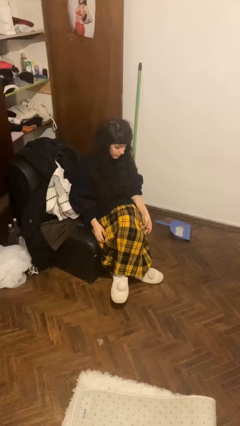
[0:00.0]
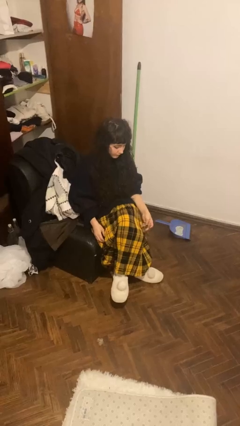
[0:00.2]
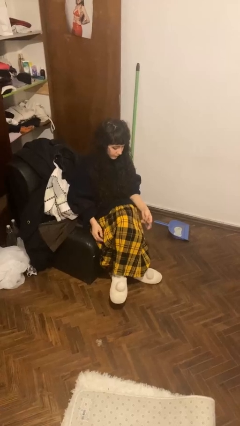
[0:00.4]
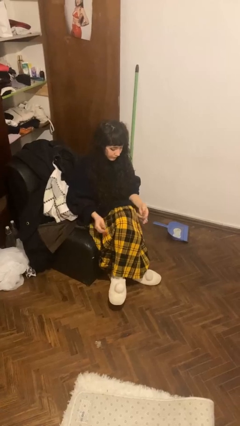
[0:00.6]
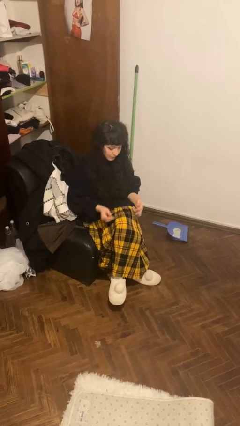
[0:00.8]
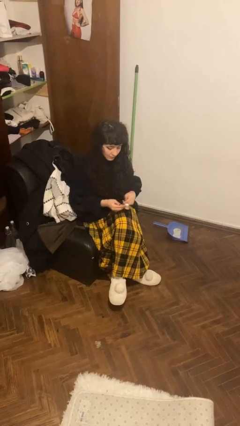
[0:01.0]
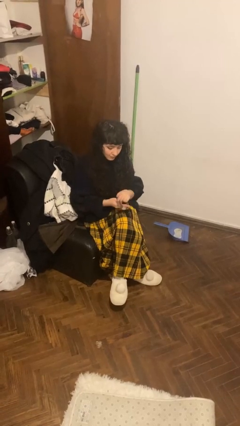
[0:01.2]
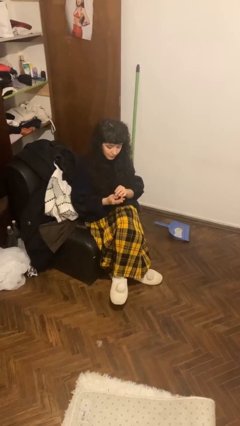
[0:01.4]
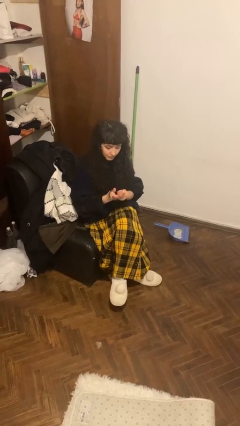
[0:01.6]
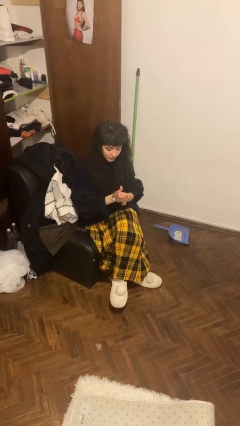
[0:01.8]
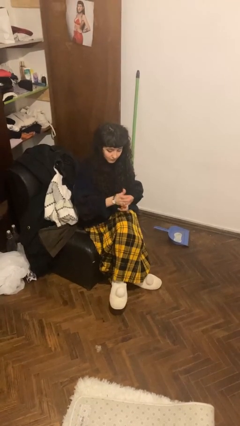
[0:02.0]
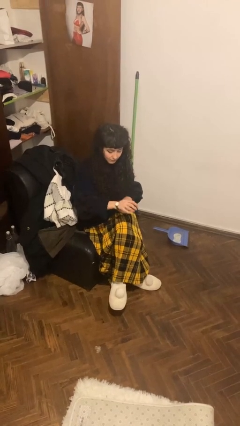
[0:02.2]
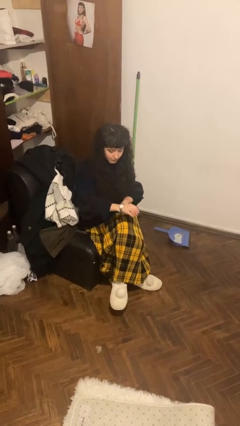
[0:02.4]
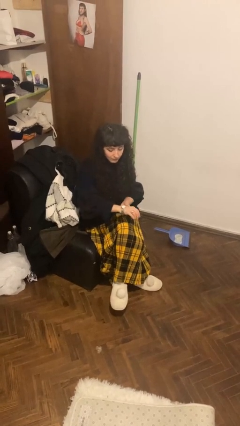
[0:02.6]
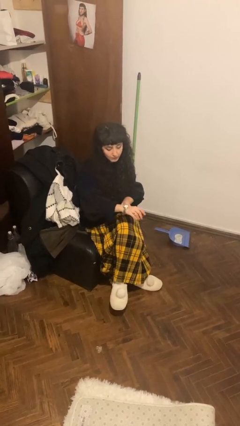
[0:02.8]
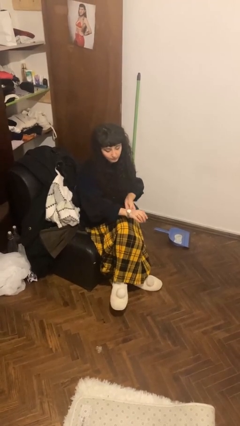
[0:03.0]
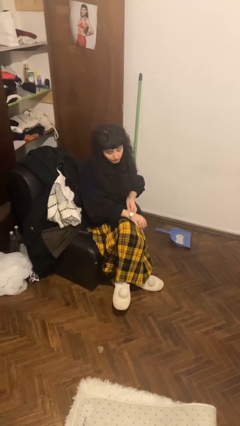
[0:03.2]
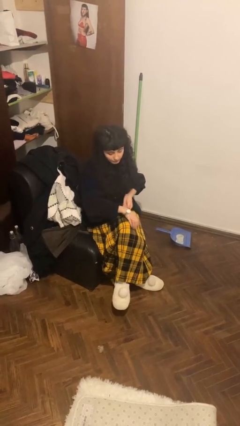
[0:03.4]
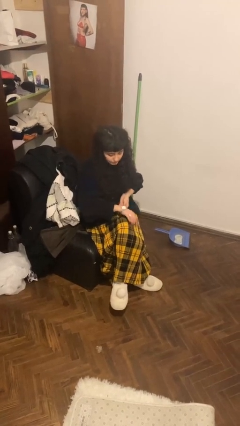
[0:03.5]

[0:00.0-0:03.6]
person puts on wristwatch

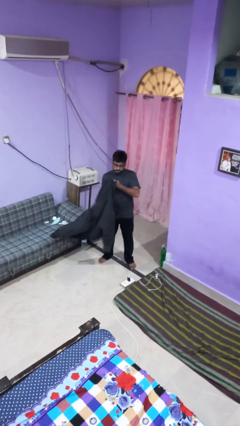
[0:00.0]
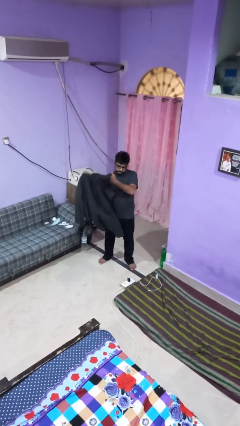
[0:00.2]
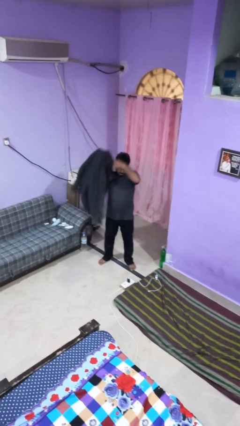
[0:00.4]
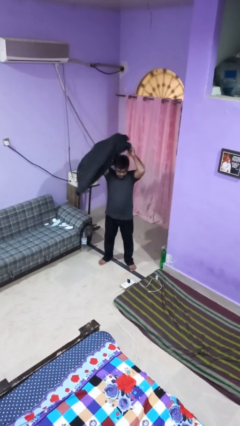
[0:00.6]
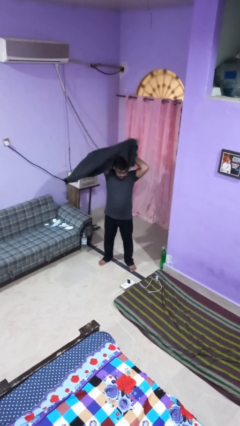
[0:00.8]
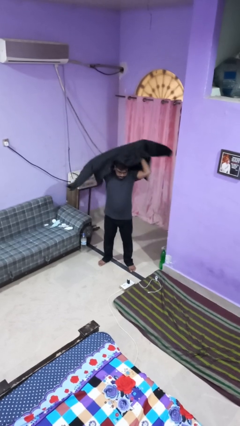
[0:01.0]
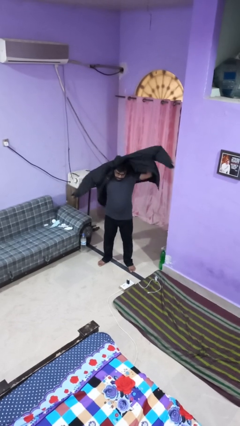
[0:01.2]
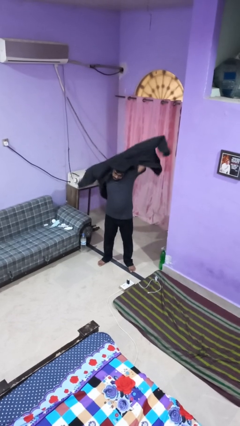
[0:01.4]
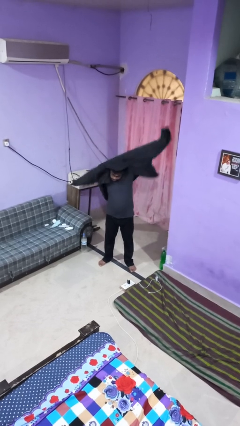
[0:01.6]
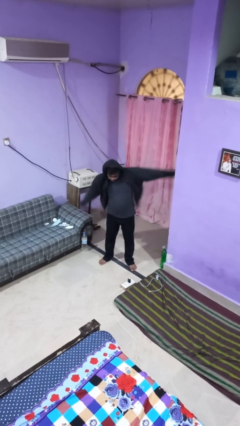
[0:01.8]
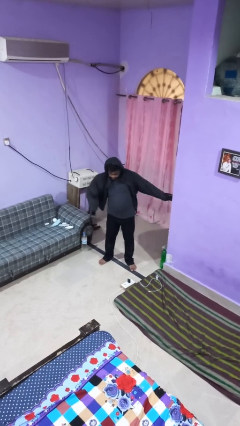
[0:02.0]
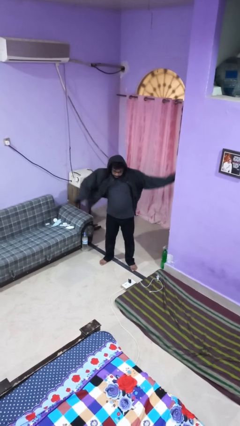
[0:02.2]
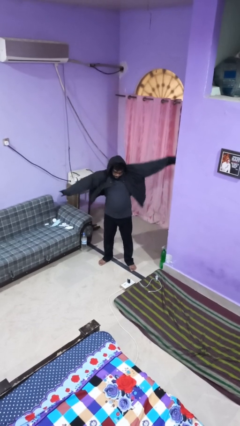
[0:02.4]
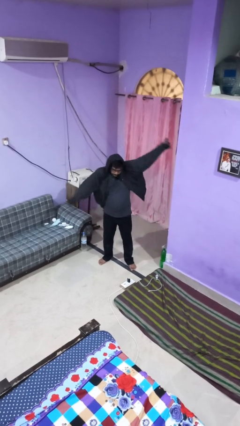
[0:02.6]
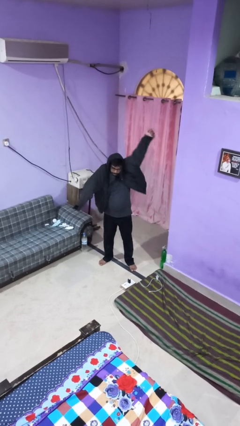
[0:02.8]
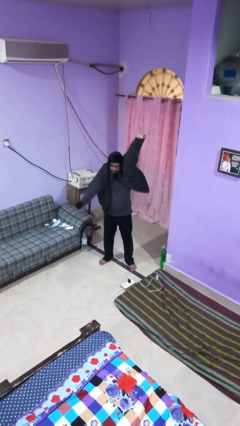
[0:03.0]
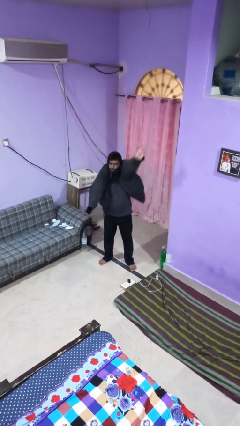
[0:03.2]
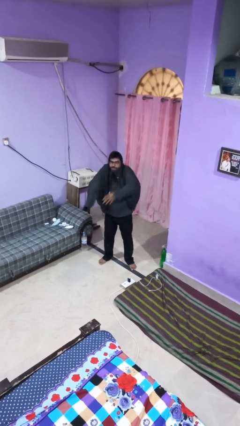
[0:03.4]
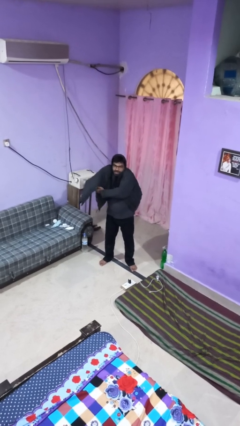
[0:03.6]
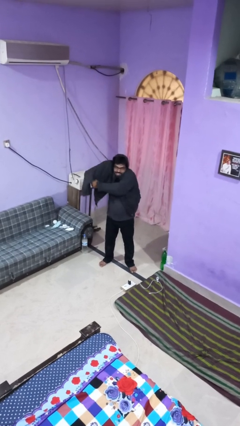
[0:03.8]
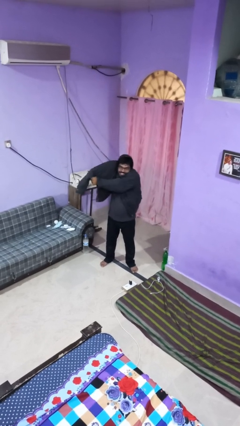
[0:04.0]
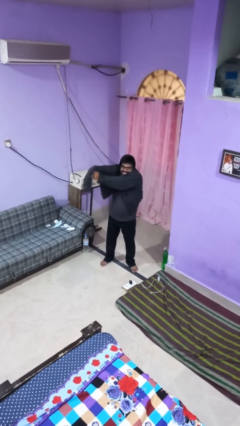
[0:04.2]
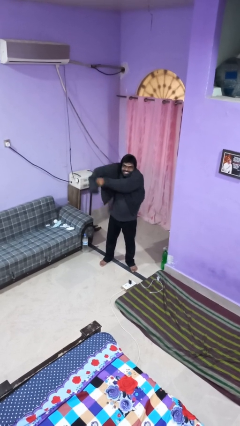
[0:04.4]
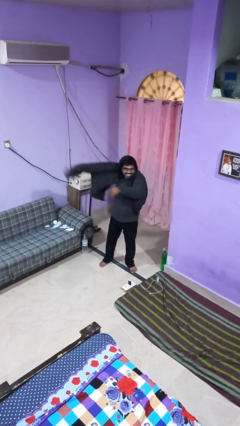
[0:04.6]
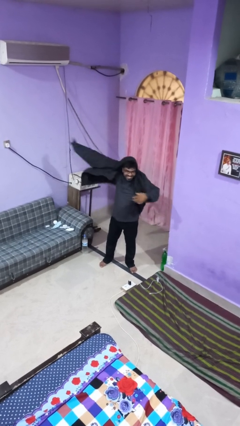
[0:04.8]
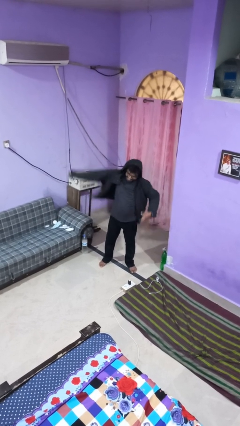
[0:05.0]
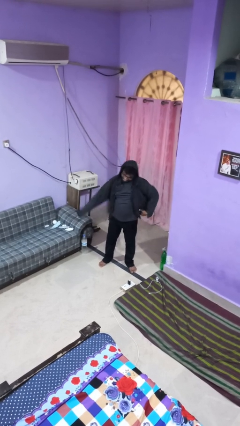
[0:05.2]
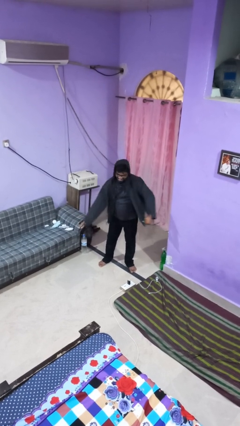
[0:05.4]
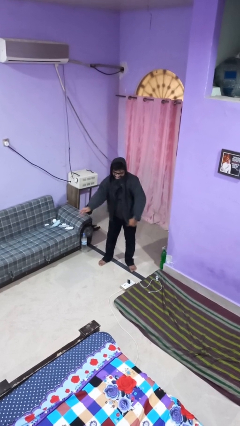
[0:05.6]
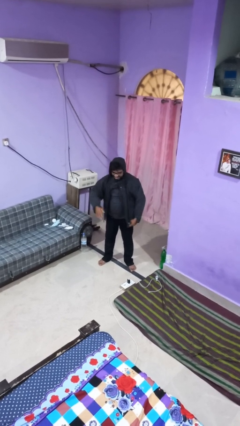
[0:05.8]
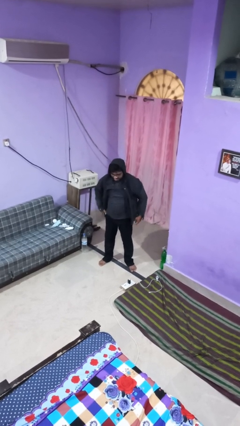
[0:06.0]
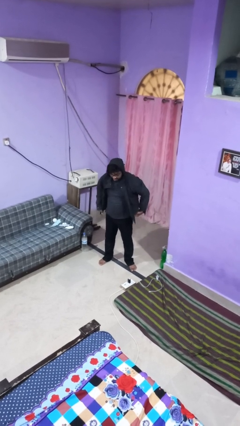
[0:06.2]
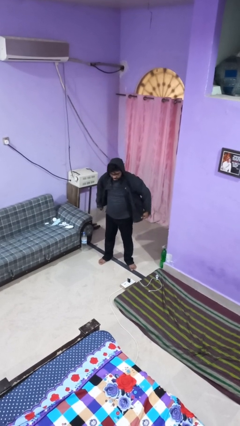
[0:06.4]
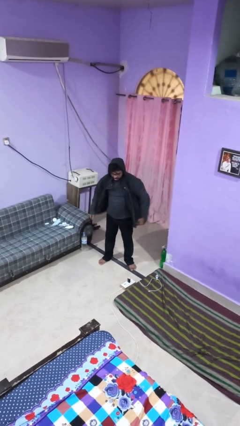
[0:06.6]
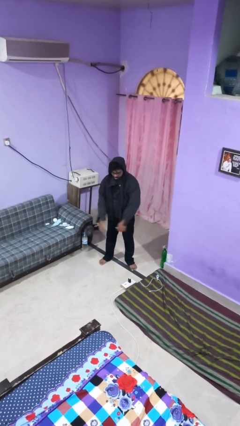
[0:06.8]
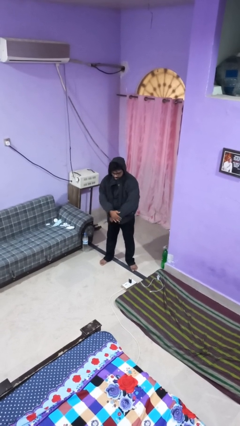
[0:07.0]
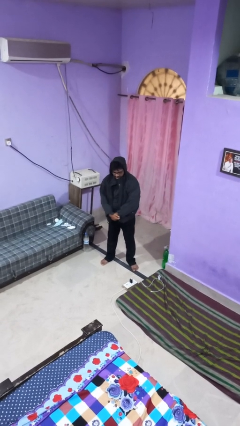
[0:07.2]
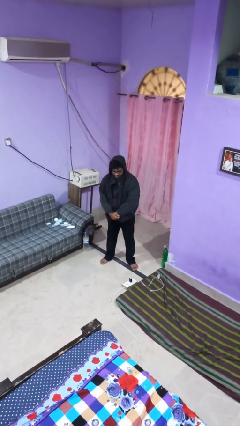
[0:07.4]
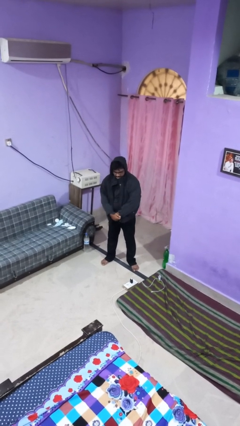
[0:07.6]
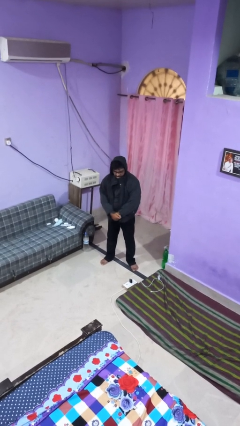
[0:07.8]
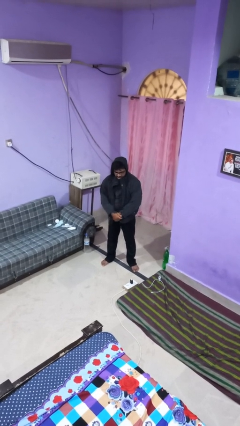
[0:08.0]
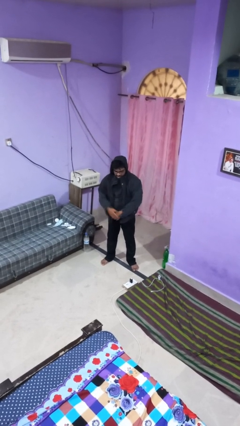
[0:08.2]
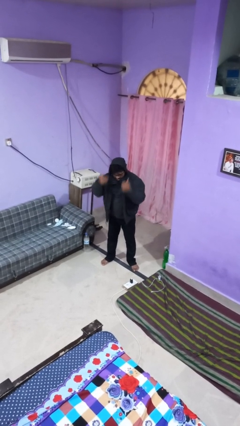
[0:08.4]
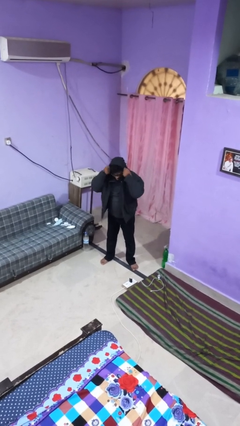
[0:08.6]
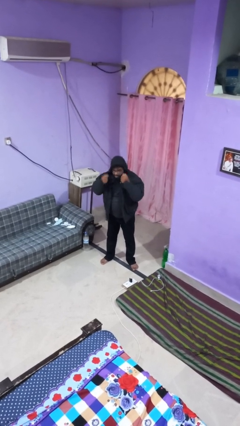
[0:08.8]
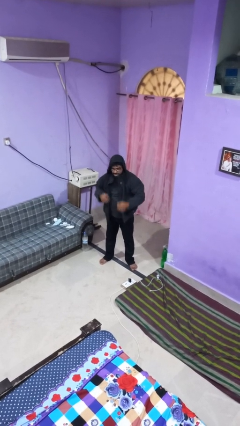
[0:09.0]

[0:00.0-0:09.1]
person puts on hoodie

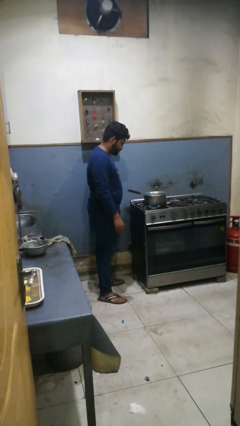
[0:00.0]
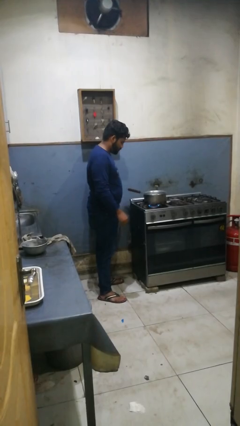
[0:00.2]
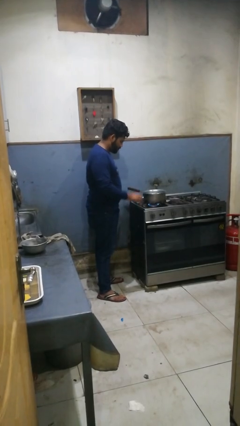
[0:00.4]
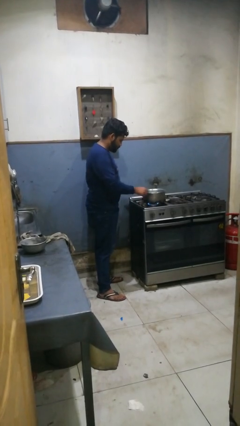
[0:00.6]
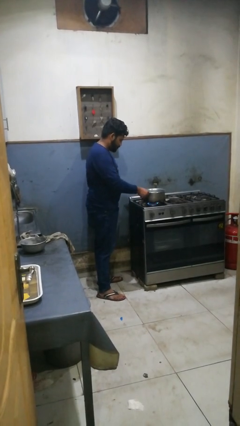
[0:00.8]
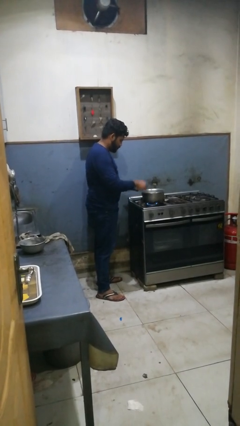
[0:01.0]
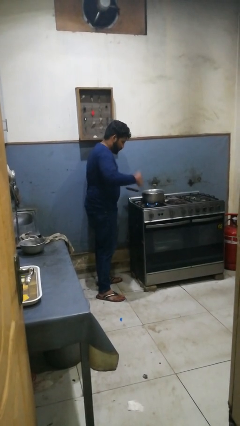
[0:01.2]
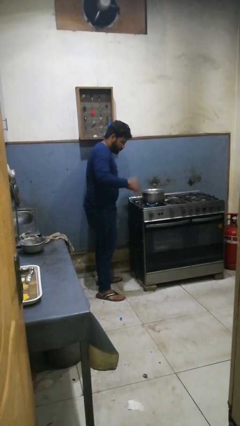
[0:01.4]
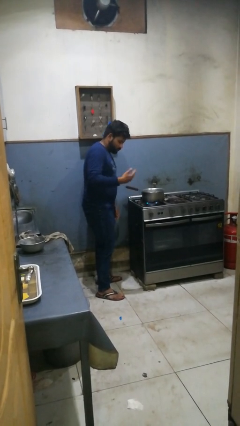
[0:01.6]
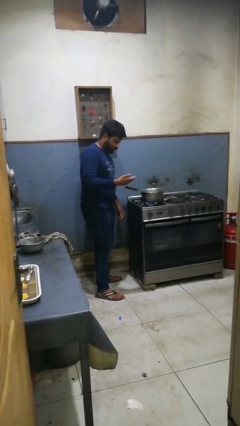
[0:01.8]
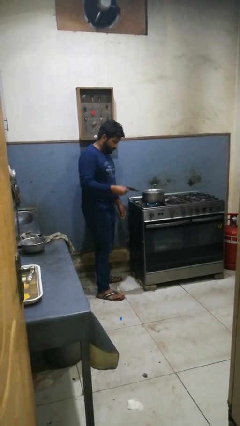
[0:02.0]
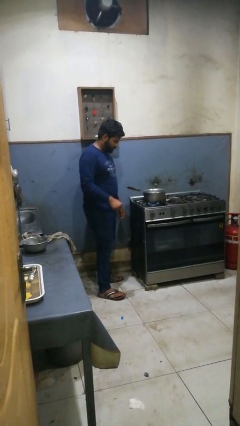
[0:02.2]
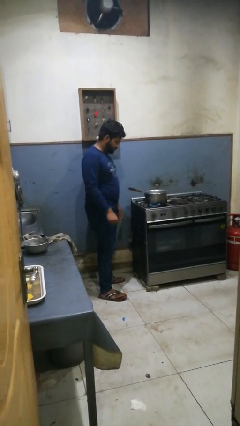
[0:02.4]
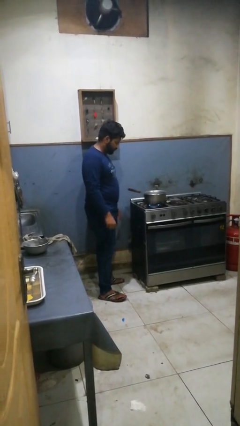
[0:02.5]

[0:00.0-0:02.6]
person burns hand

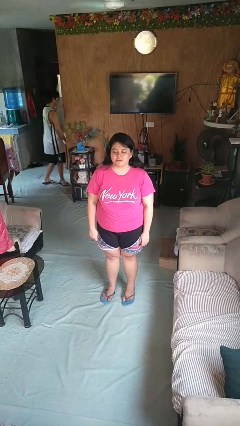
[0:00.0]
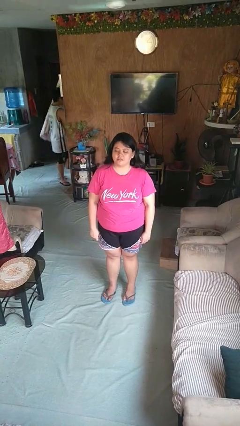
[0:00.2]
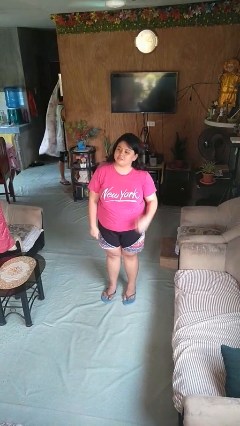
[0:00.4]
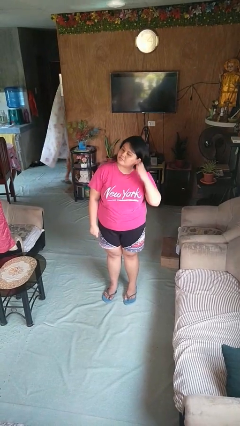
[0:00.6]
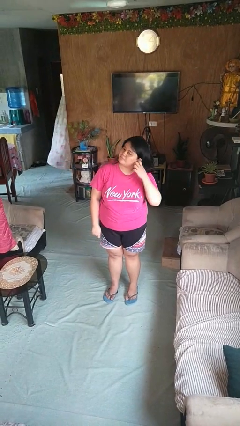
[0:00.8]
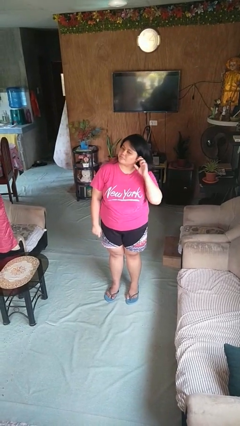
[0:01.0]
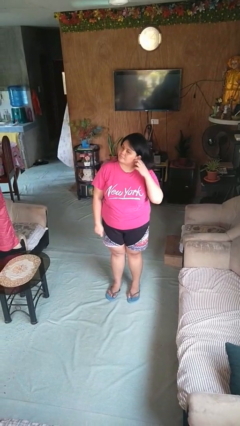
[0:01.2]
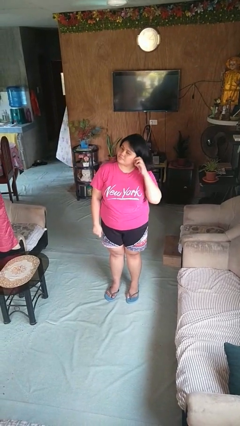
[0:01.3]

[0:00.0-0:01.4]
person touches earlobe

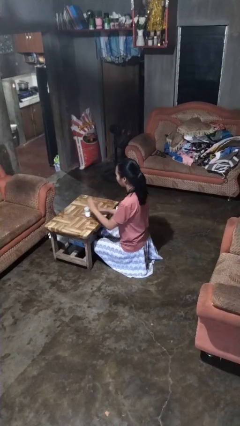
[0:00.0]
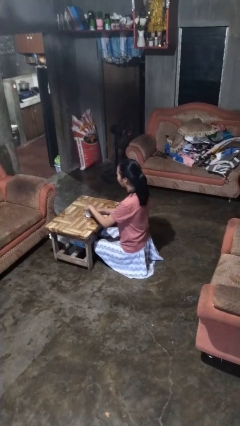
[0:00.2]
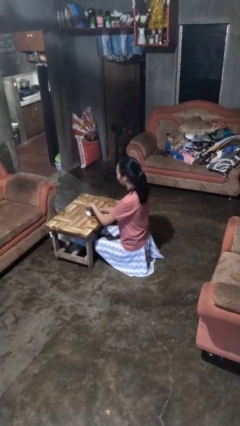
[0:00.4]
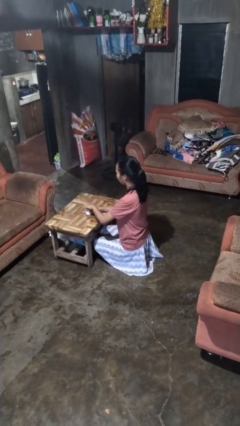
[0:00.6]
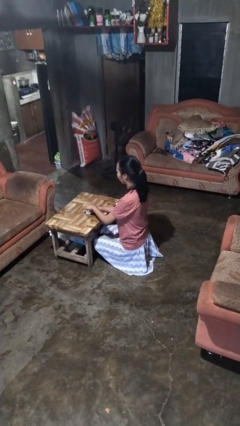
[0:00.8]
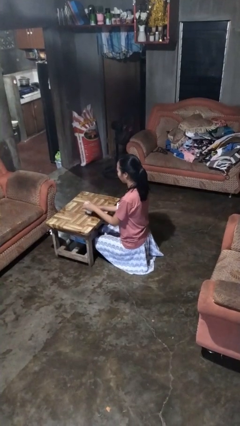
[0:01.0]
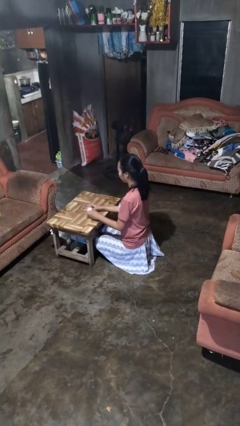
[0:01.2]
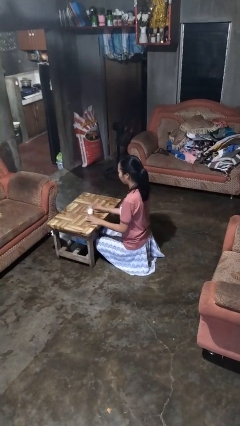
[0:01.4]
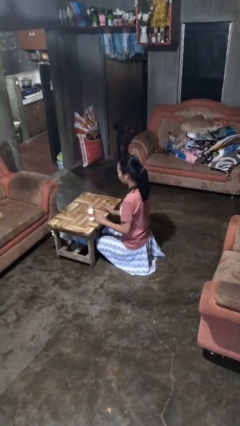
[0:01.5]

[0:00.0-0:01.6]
person opens jar
